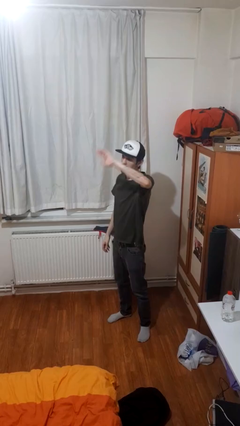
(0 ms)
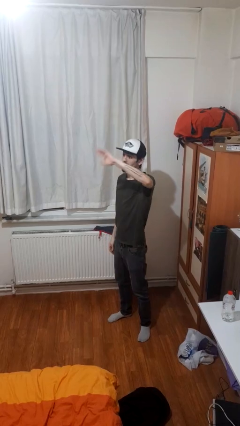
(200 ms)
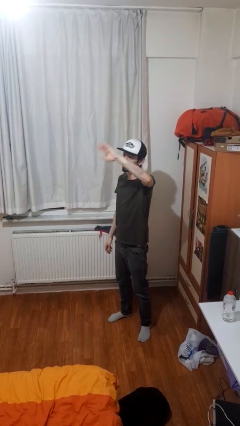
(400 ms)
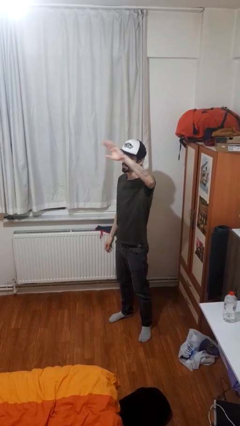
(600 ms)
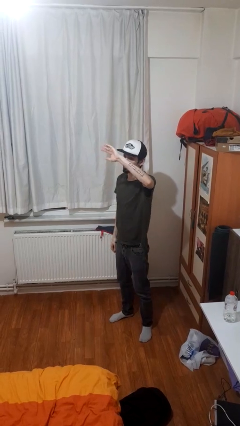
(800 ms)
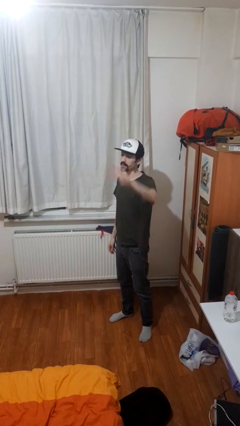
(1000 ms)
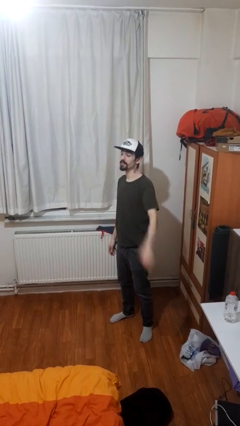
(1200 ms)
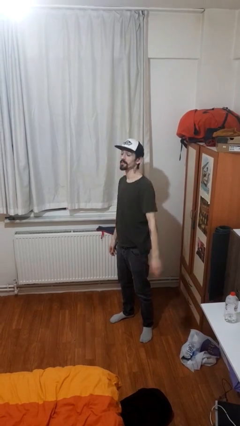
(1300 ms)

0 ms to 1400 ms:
person waves at person

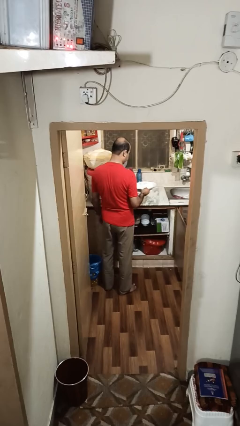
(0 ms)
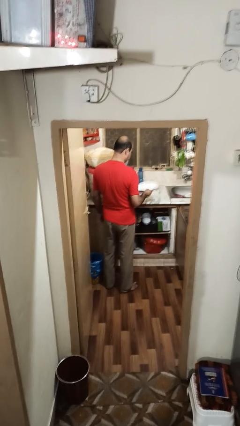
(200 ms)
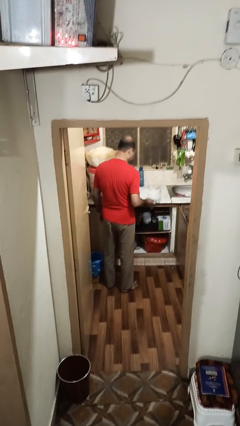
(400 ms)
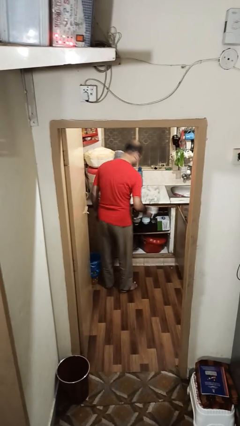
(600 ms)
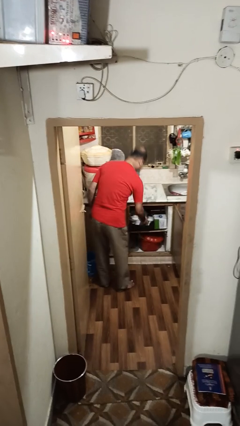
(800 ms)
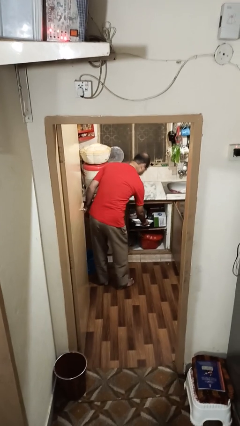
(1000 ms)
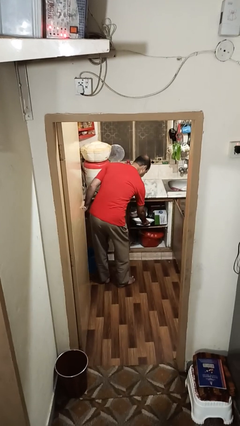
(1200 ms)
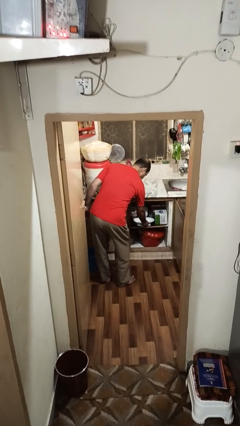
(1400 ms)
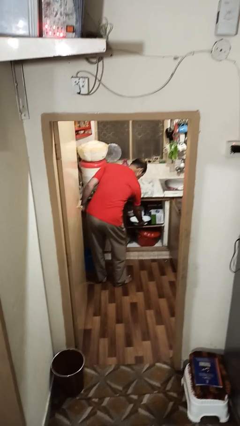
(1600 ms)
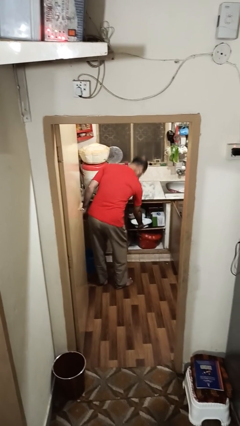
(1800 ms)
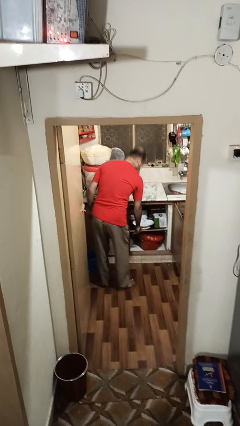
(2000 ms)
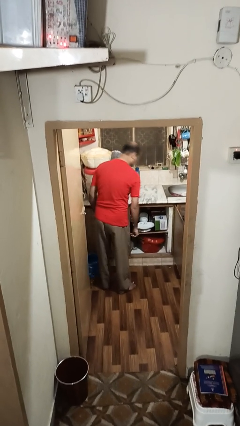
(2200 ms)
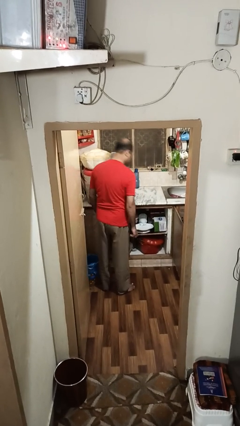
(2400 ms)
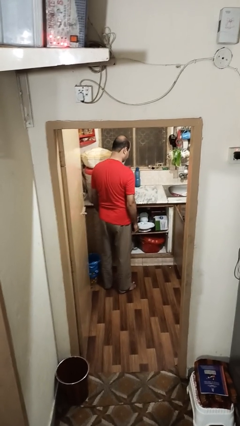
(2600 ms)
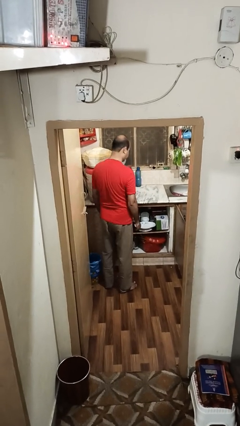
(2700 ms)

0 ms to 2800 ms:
person puts down object into cabinet

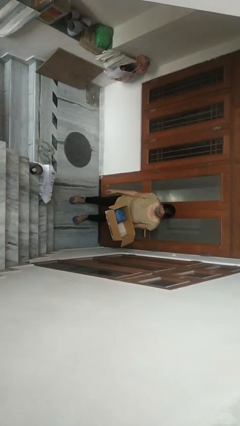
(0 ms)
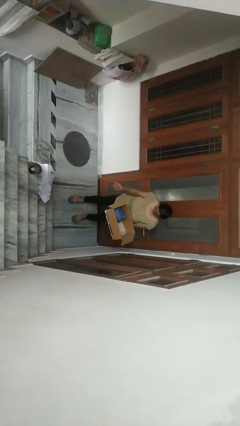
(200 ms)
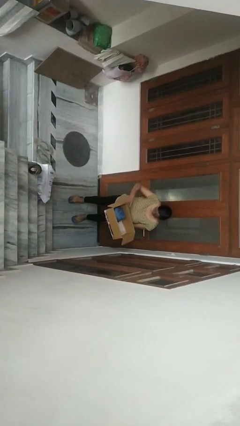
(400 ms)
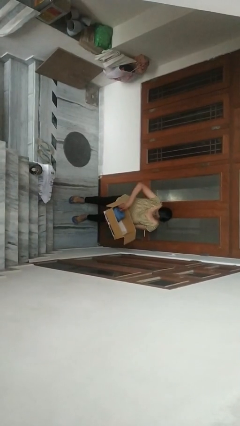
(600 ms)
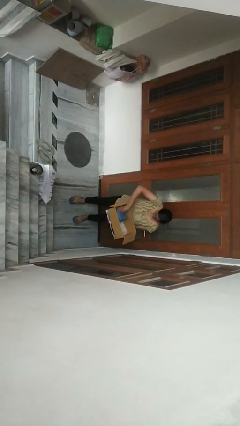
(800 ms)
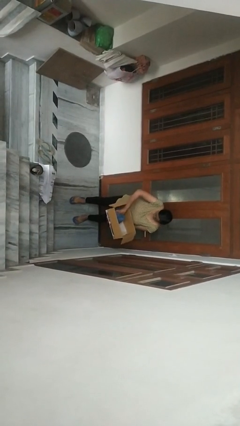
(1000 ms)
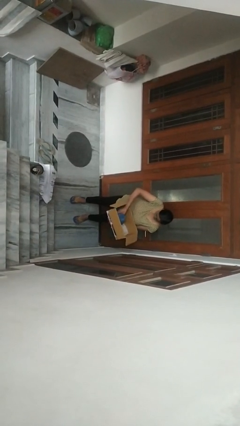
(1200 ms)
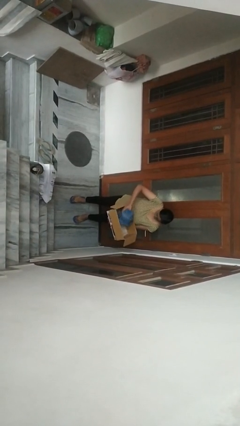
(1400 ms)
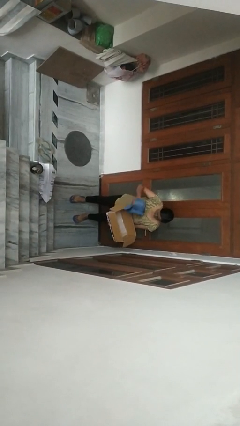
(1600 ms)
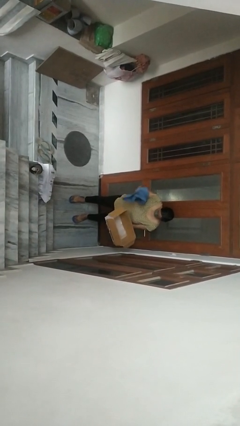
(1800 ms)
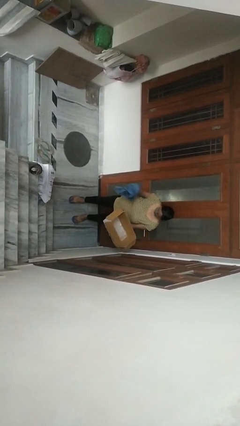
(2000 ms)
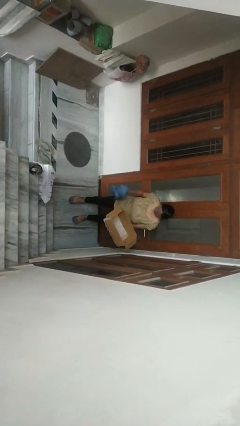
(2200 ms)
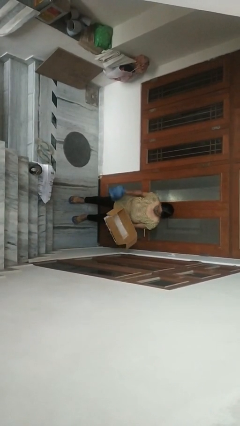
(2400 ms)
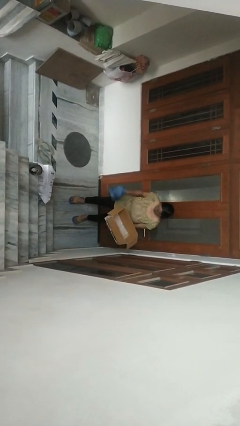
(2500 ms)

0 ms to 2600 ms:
person takes object from box

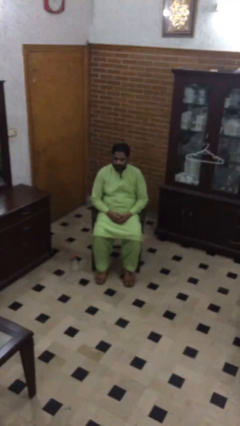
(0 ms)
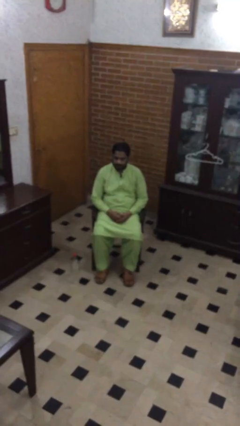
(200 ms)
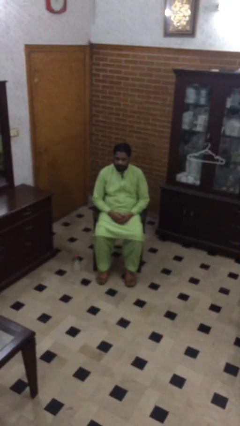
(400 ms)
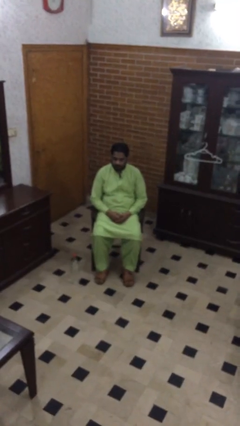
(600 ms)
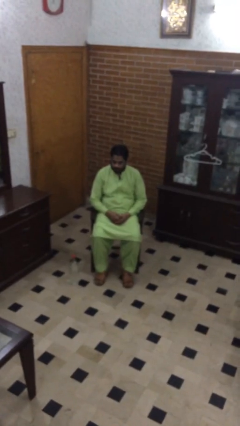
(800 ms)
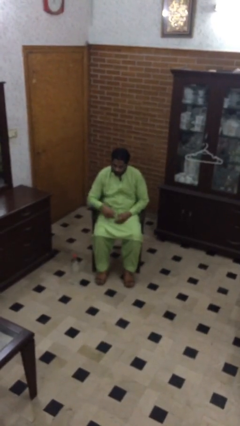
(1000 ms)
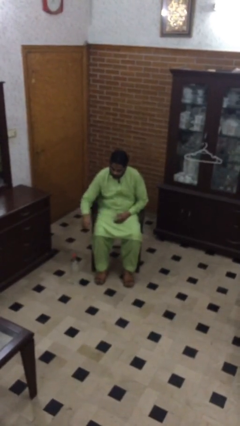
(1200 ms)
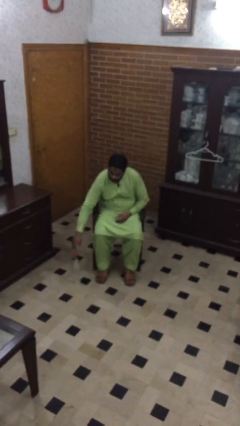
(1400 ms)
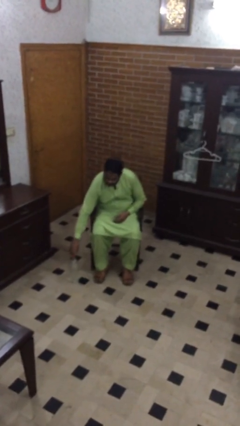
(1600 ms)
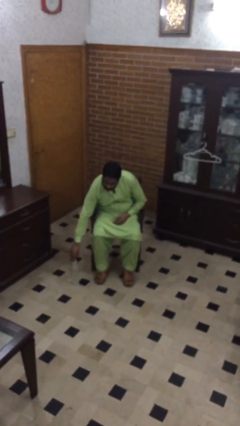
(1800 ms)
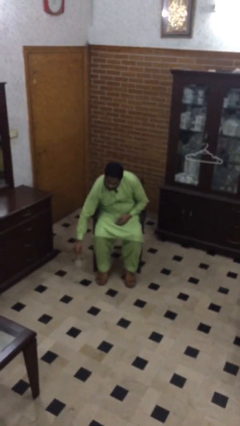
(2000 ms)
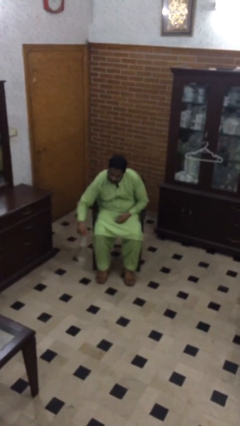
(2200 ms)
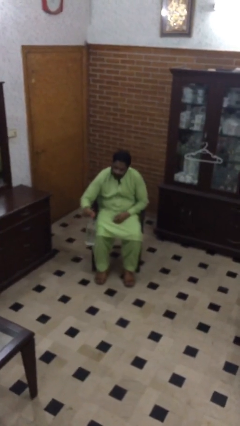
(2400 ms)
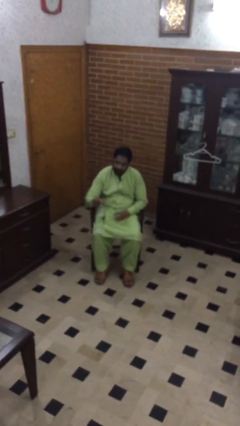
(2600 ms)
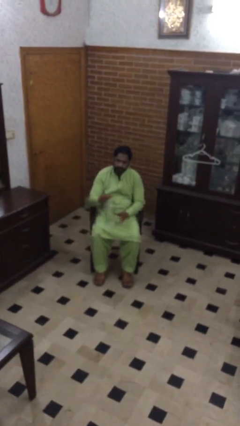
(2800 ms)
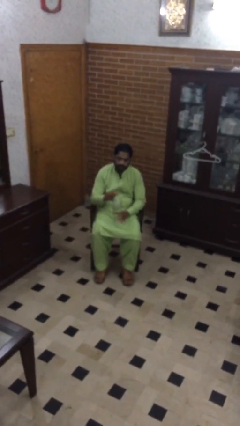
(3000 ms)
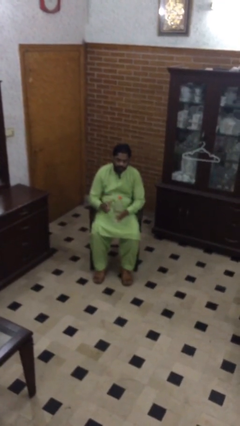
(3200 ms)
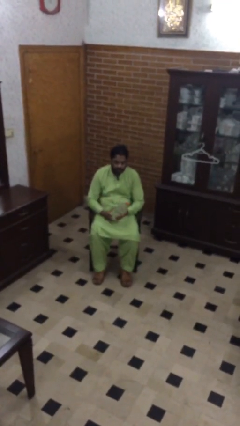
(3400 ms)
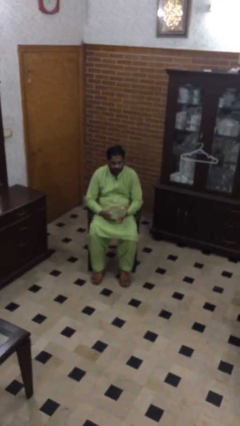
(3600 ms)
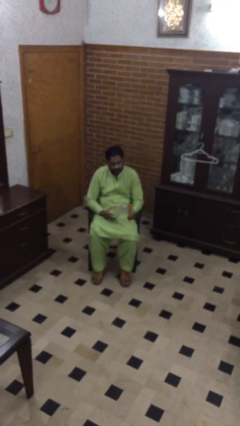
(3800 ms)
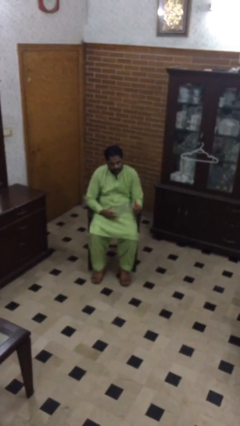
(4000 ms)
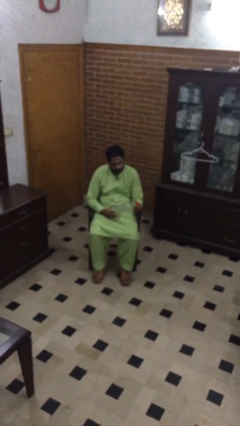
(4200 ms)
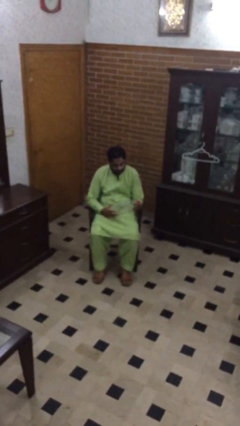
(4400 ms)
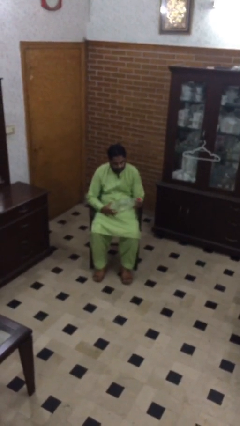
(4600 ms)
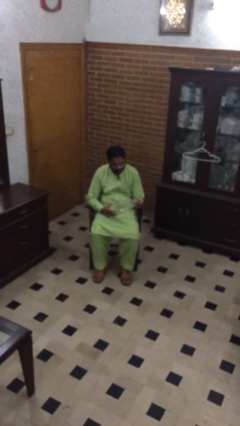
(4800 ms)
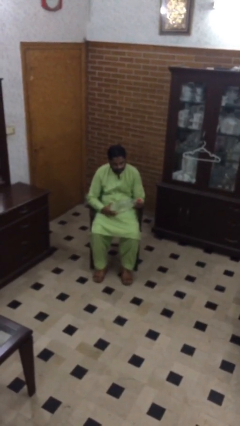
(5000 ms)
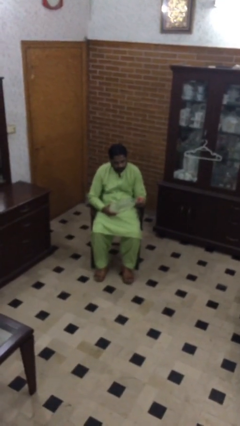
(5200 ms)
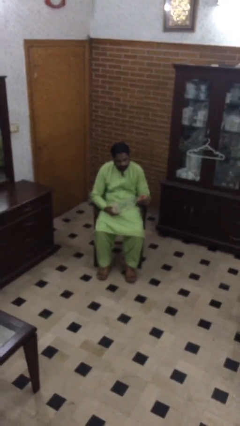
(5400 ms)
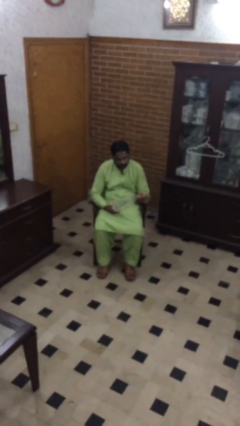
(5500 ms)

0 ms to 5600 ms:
person picks up object from floor

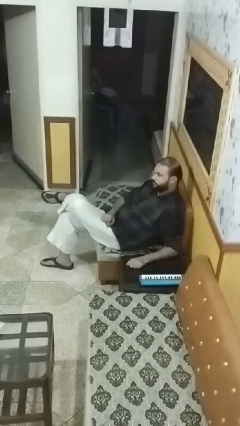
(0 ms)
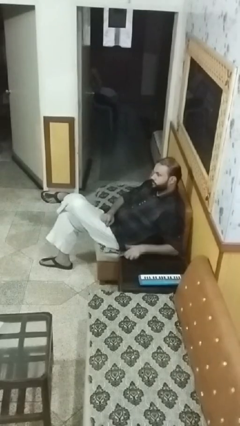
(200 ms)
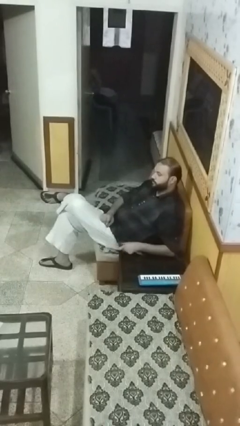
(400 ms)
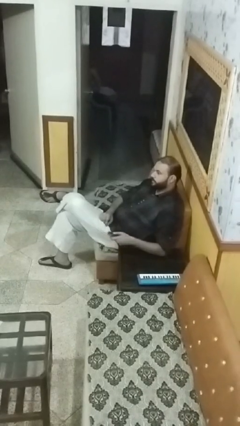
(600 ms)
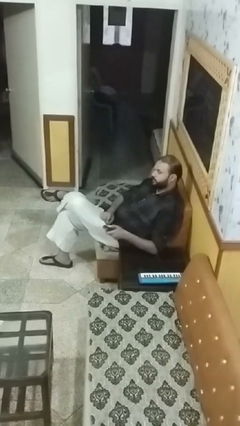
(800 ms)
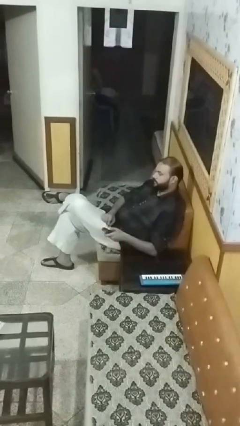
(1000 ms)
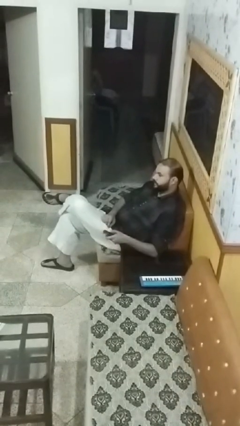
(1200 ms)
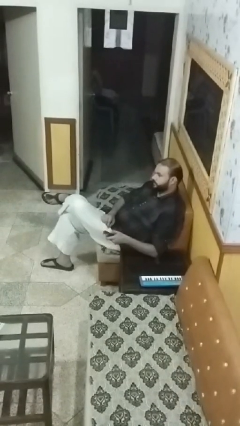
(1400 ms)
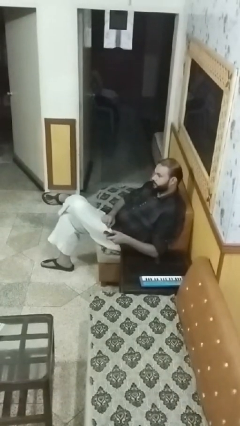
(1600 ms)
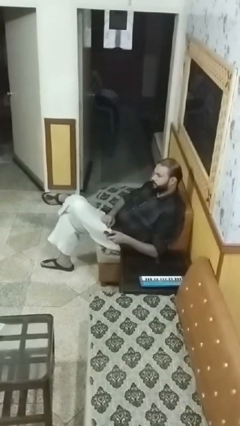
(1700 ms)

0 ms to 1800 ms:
person uses television remote

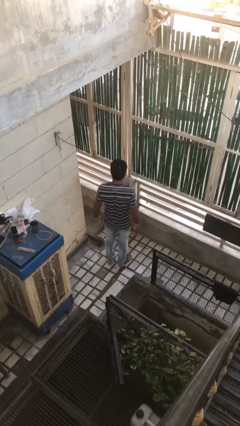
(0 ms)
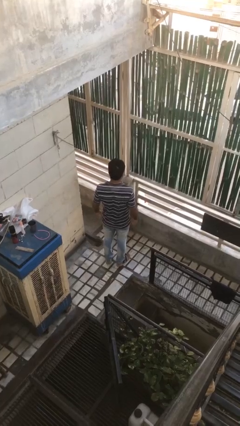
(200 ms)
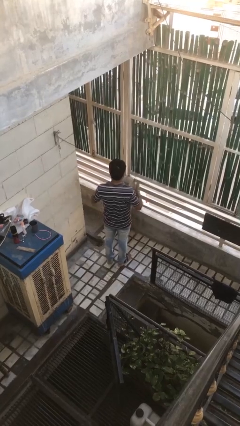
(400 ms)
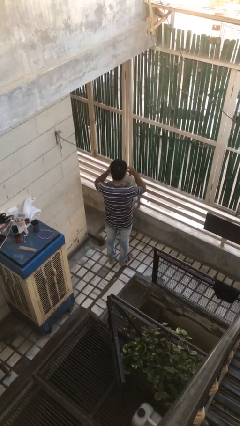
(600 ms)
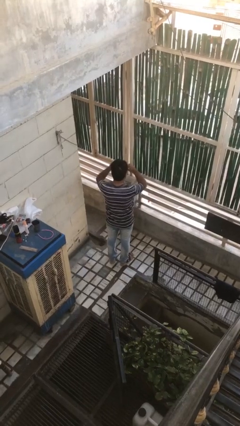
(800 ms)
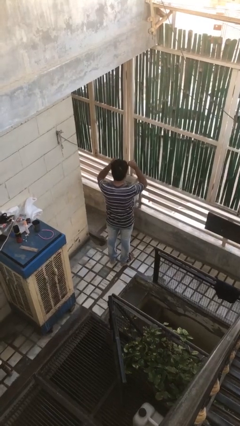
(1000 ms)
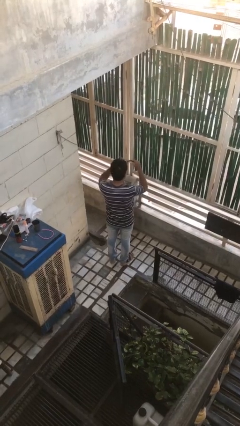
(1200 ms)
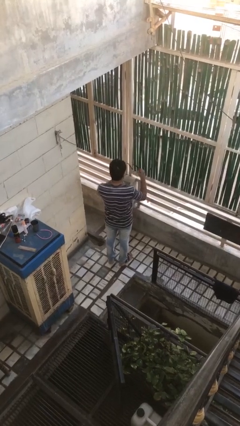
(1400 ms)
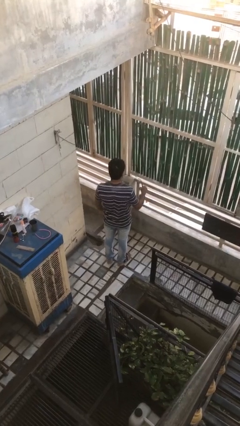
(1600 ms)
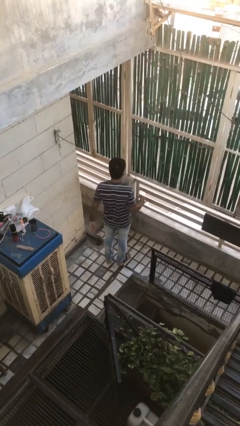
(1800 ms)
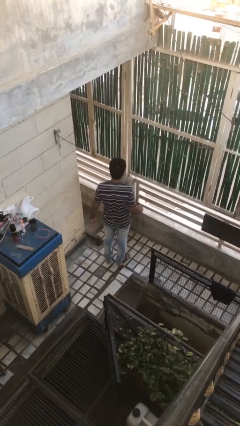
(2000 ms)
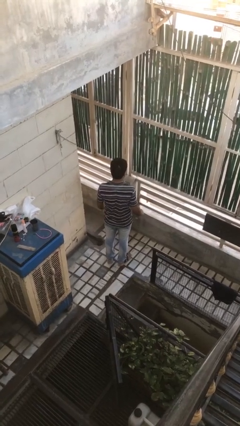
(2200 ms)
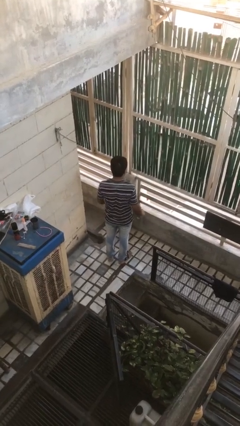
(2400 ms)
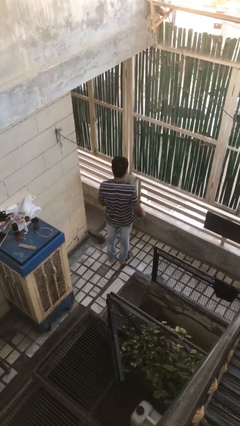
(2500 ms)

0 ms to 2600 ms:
person takes off sunglasses

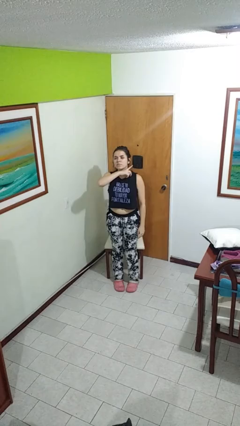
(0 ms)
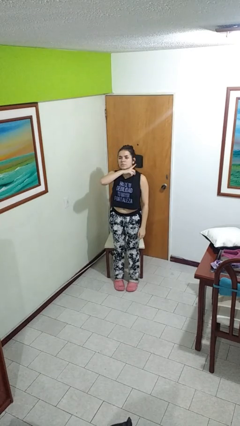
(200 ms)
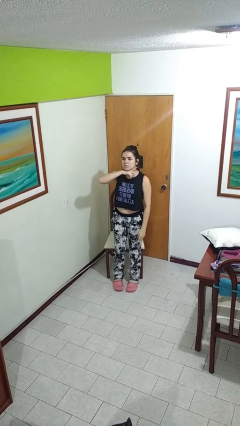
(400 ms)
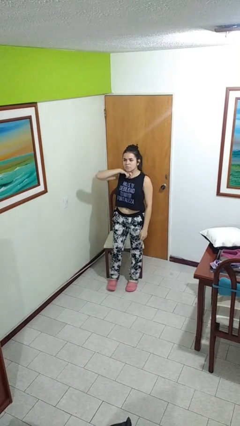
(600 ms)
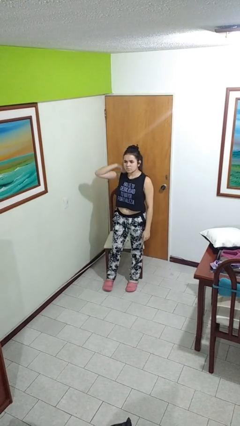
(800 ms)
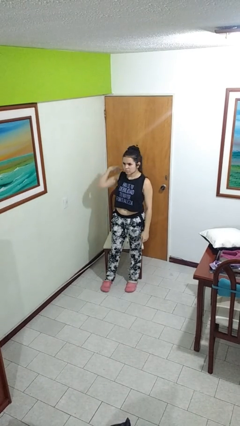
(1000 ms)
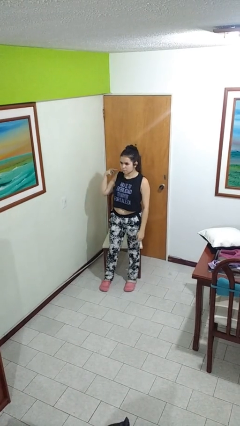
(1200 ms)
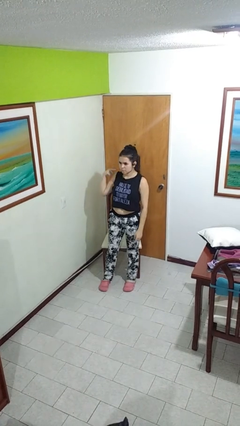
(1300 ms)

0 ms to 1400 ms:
person gestures cut
